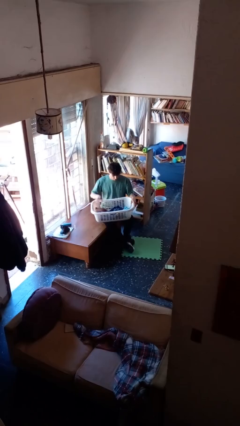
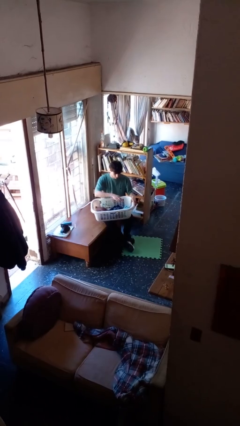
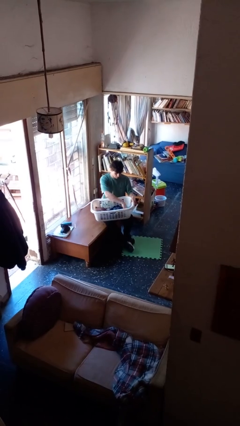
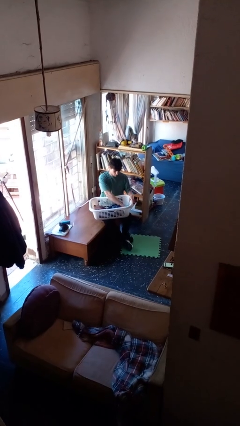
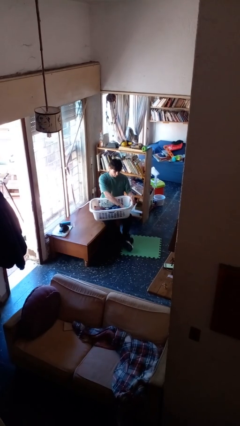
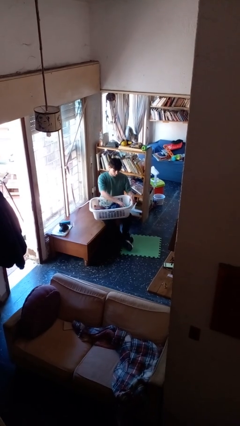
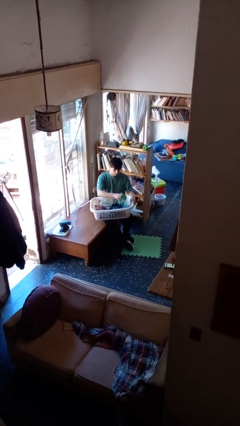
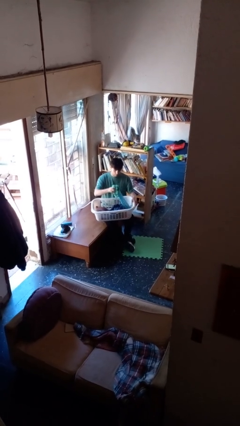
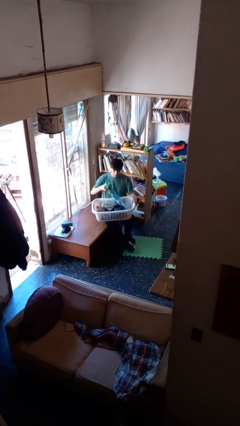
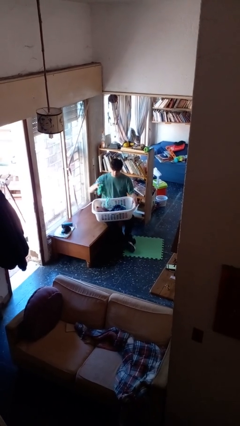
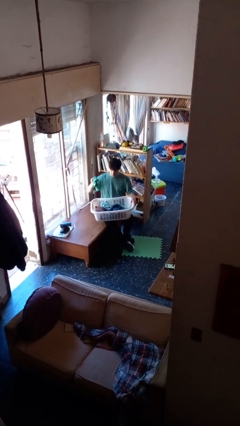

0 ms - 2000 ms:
person takes object from basket

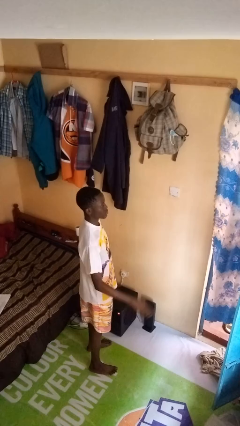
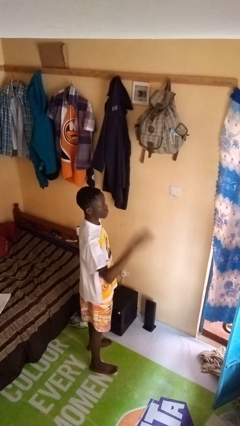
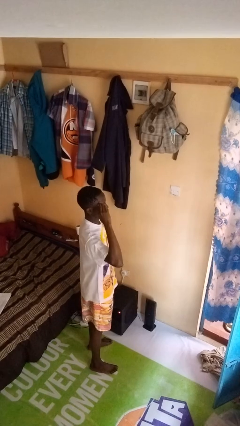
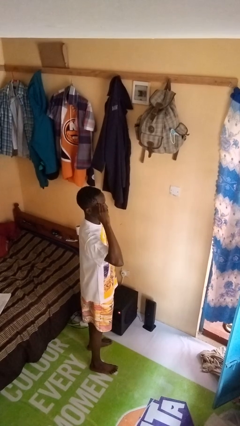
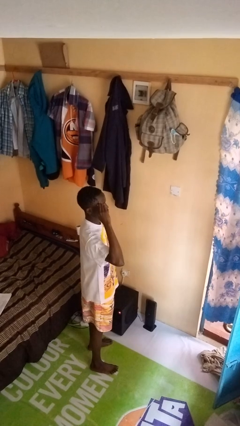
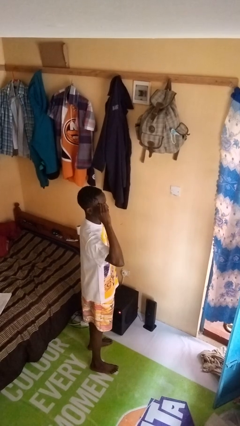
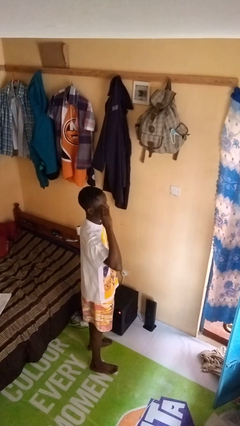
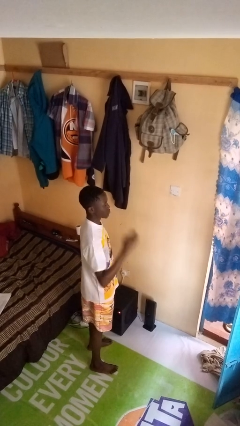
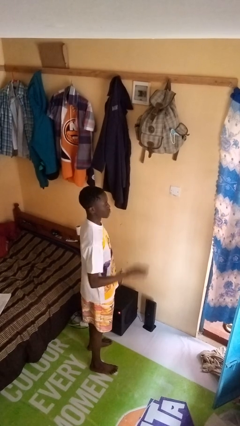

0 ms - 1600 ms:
person salutes

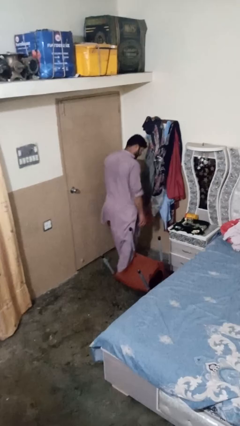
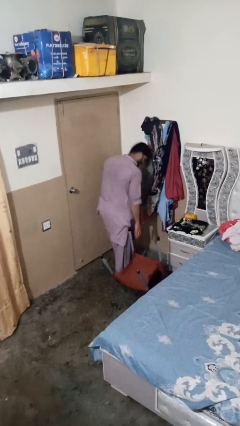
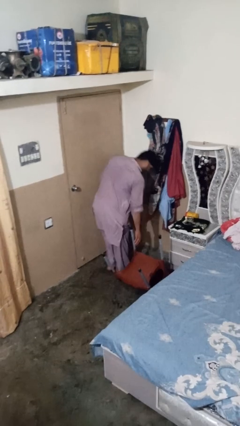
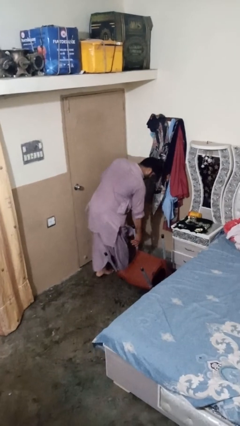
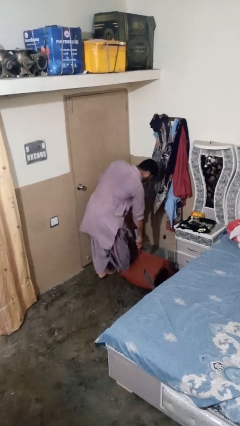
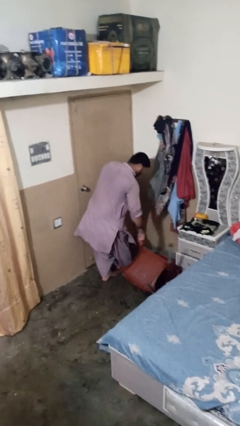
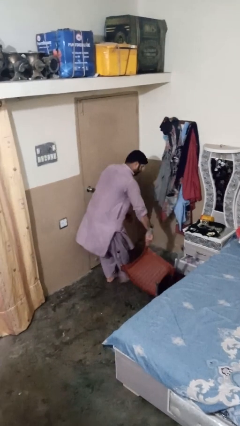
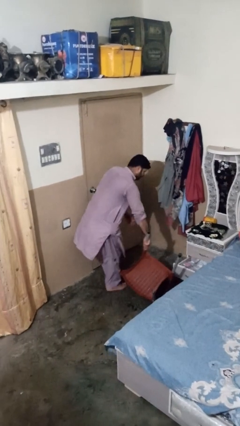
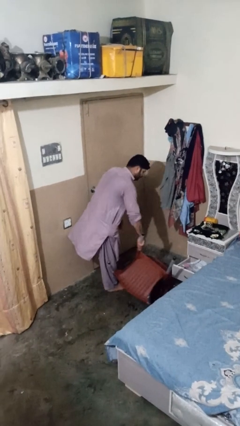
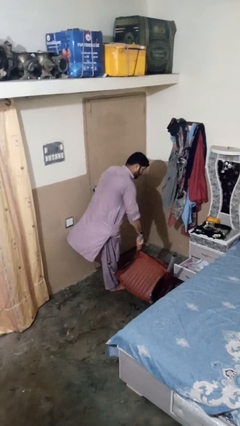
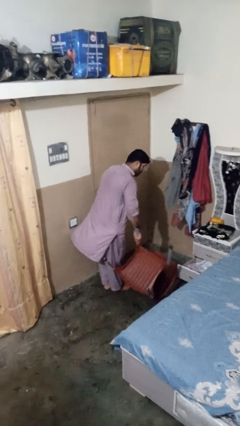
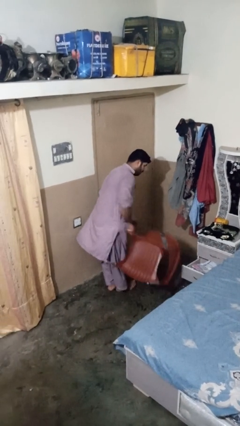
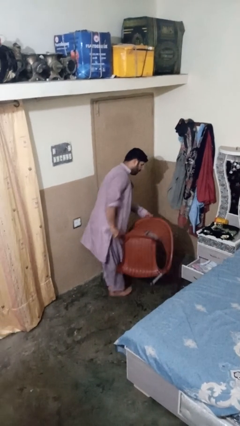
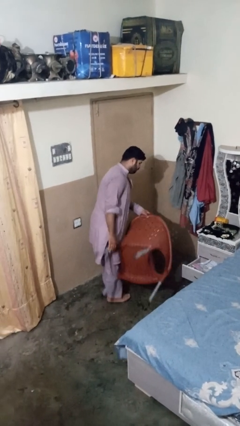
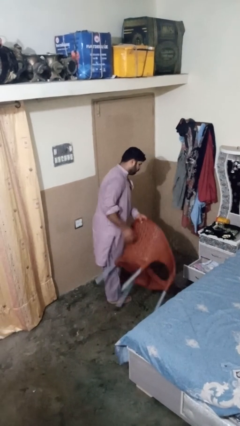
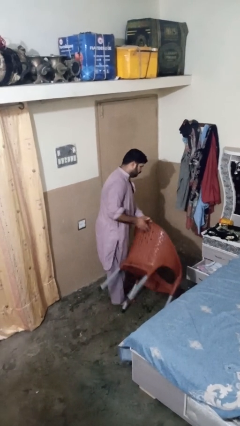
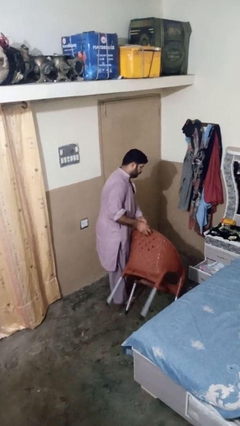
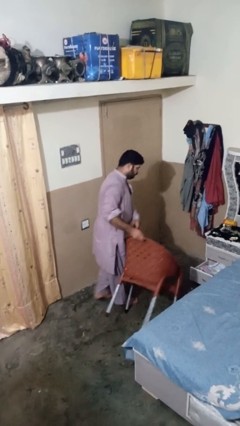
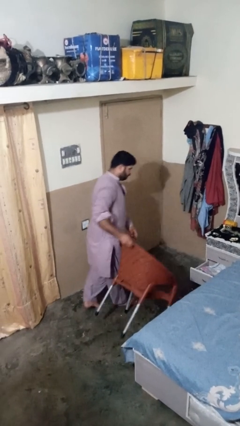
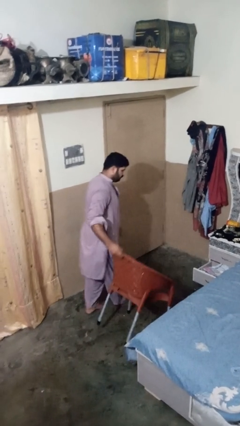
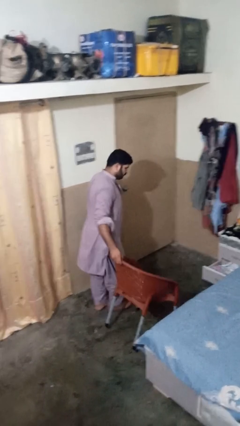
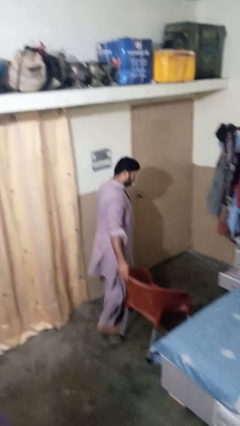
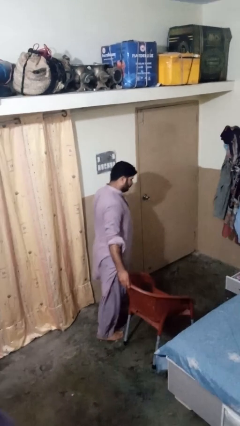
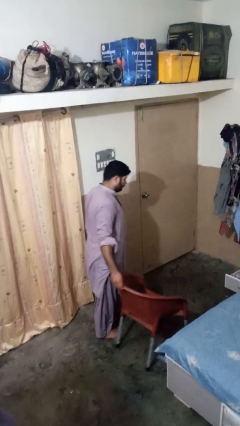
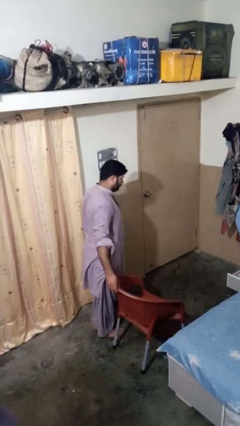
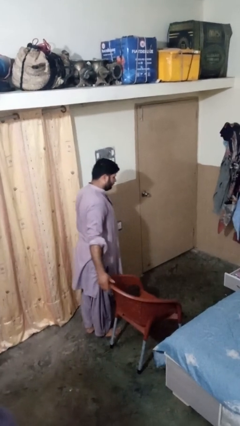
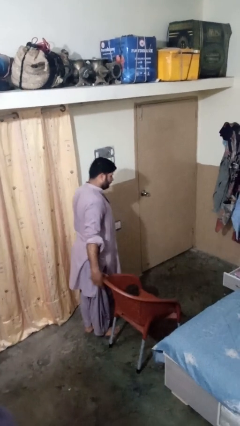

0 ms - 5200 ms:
person sets upright furniture

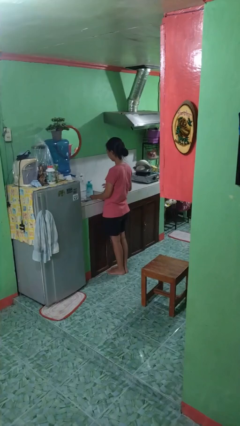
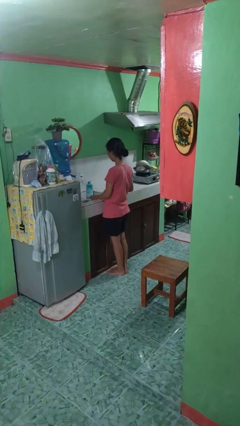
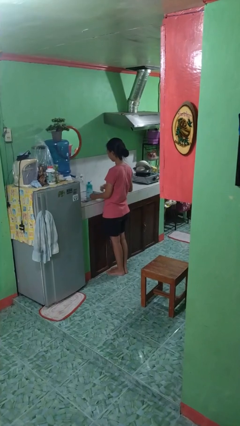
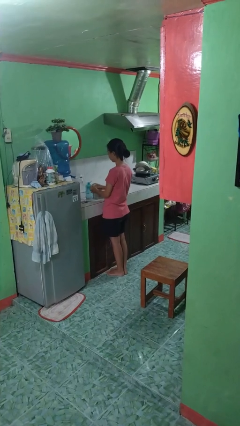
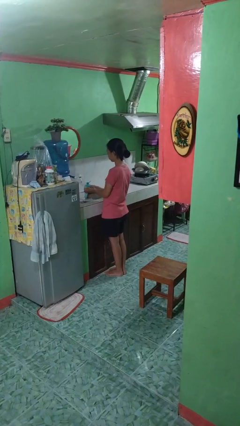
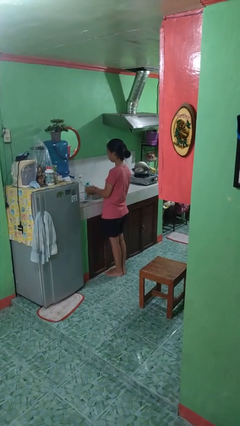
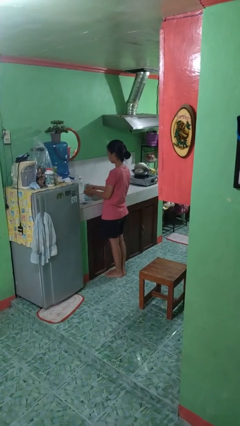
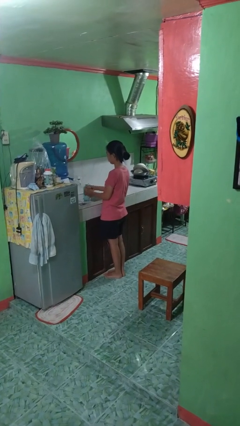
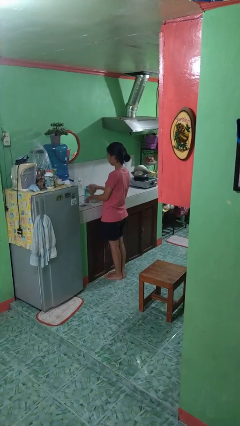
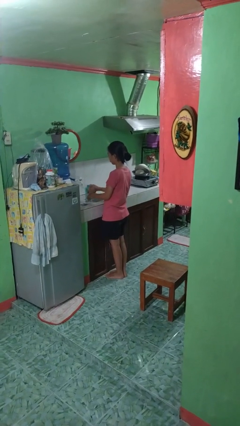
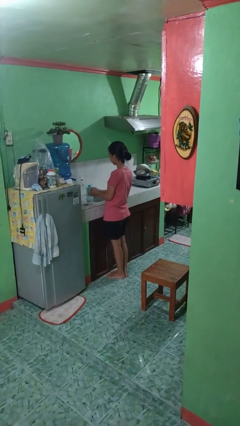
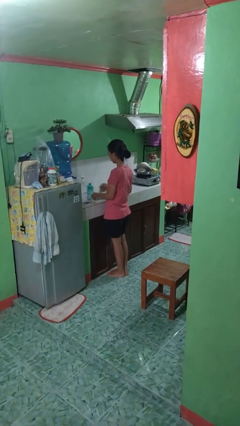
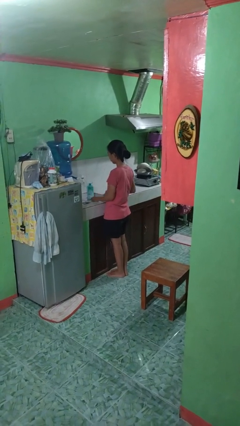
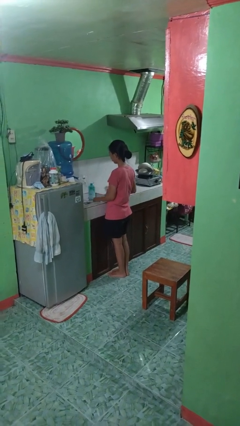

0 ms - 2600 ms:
person dries hands with towel

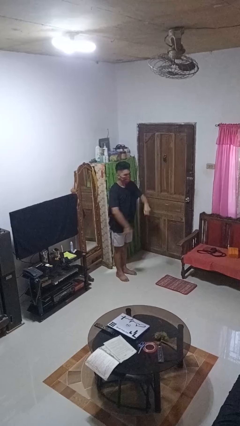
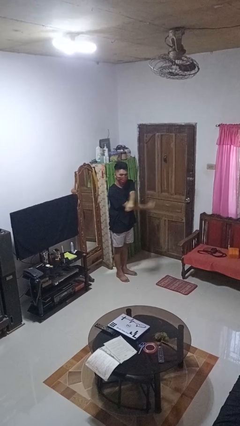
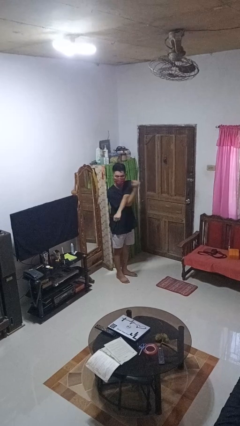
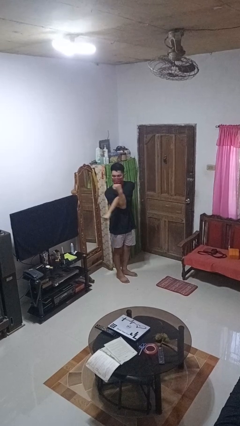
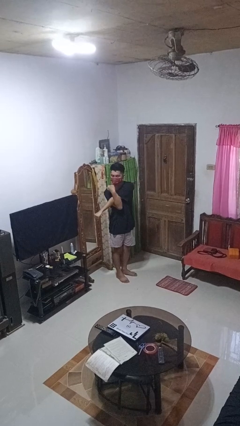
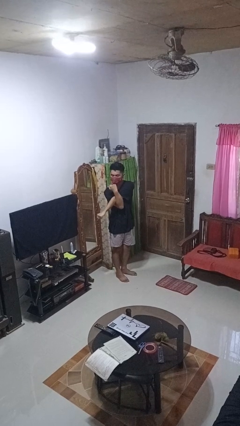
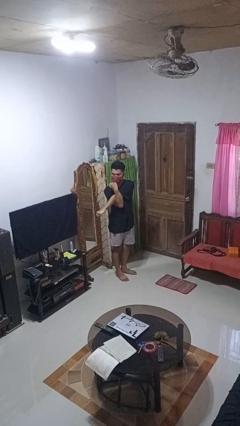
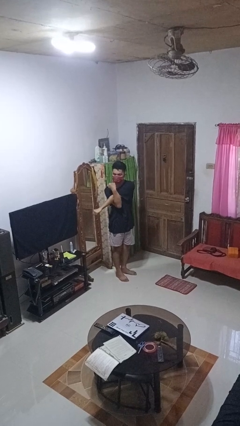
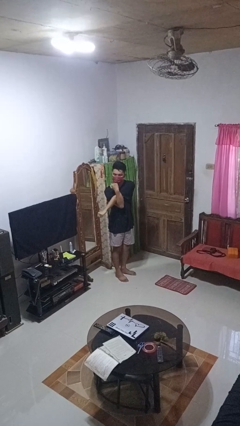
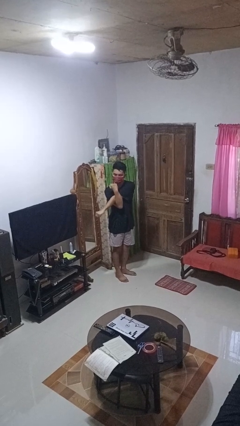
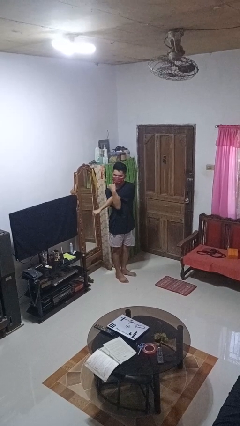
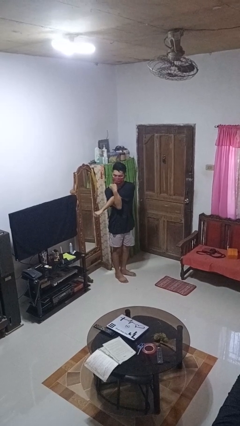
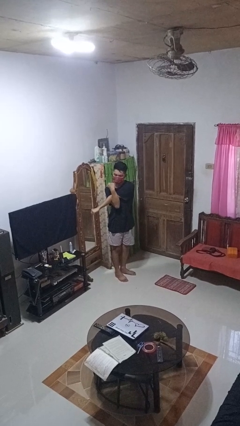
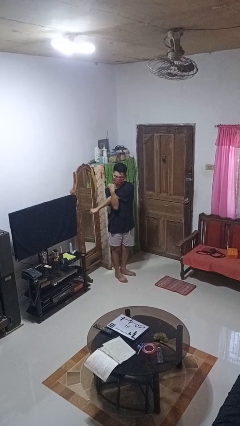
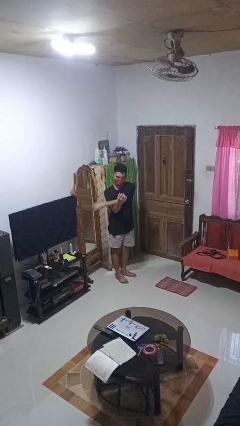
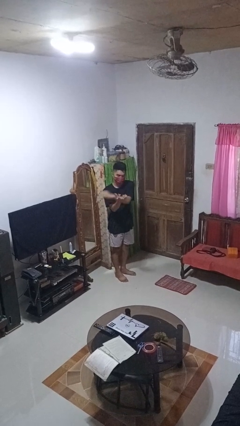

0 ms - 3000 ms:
person stretches arms to side

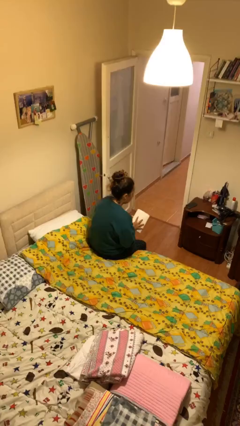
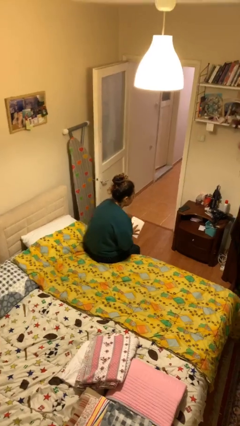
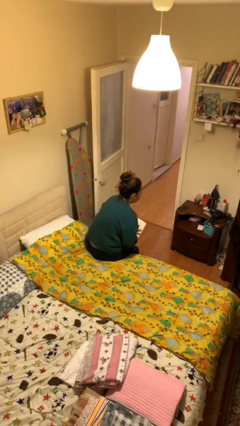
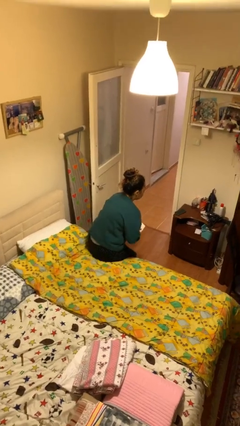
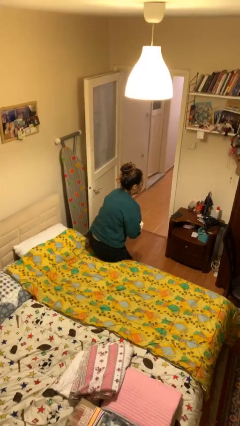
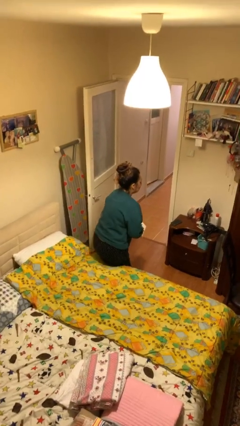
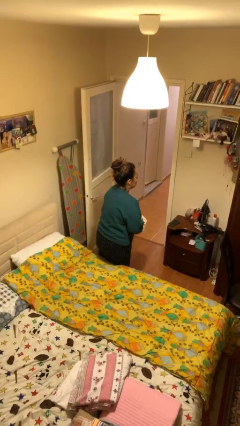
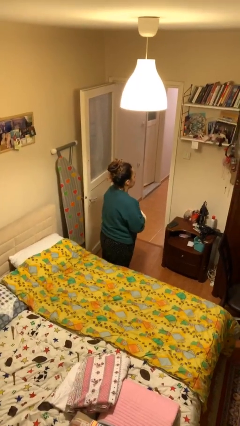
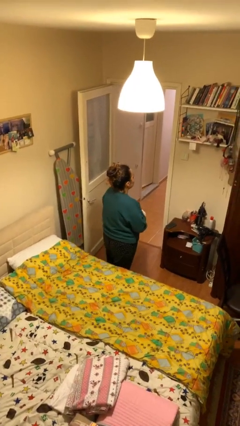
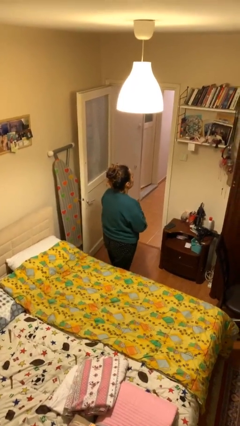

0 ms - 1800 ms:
person stands up

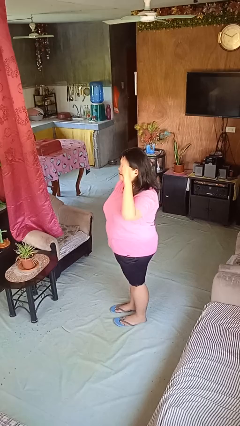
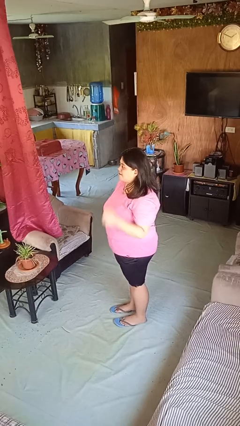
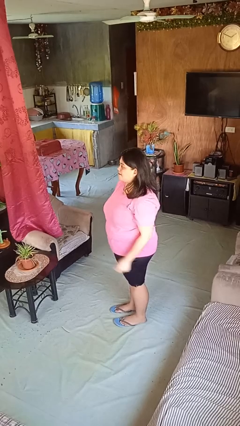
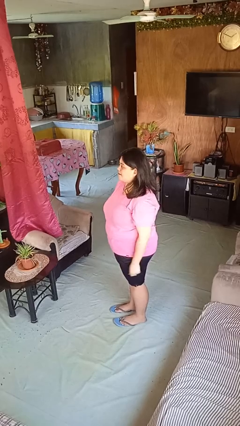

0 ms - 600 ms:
person gestures lower hand
